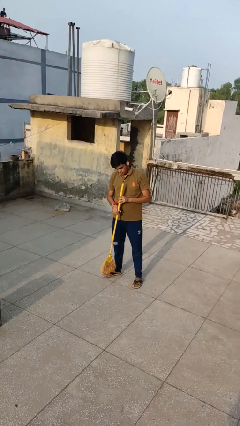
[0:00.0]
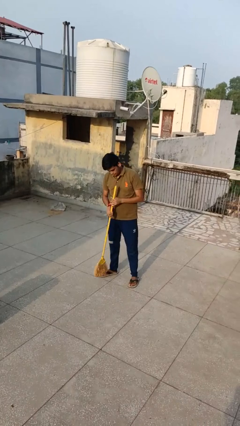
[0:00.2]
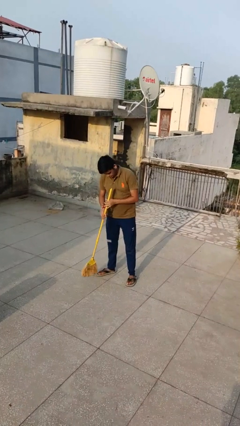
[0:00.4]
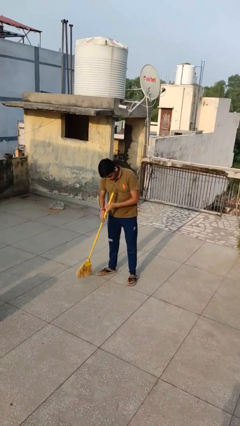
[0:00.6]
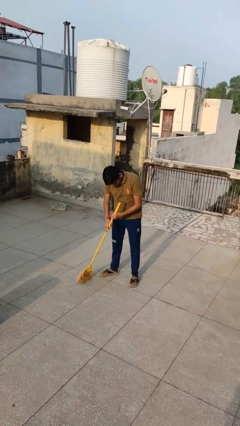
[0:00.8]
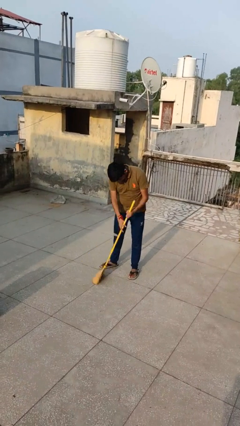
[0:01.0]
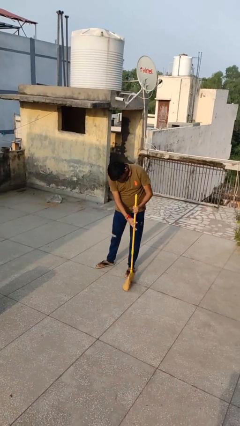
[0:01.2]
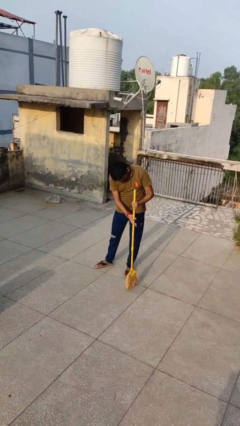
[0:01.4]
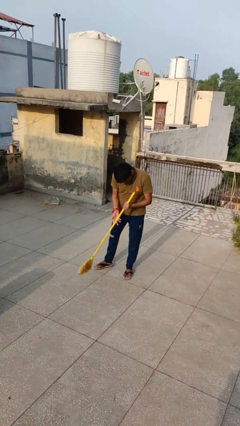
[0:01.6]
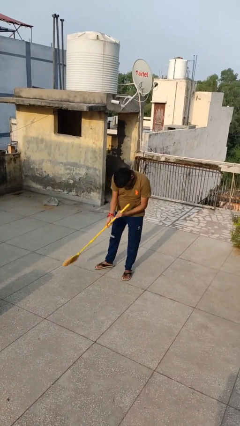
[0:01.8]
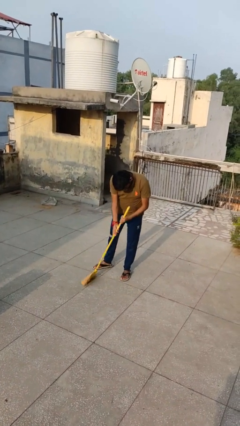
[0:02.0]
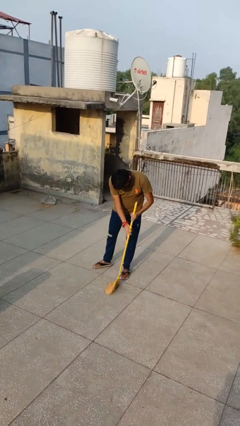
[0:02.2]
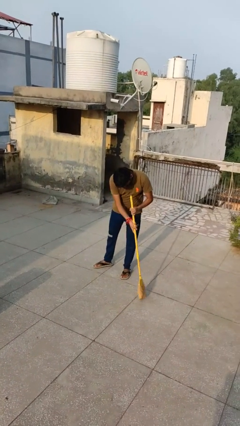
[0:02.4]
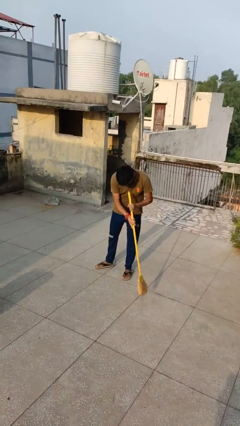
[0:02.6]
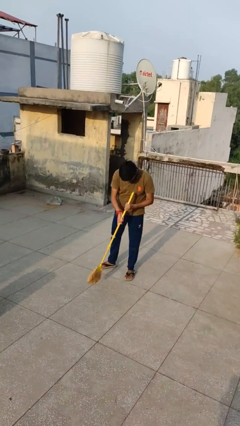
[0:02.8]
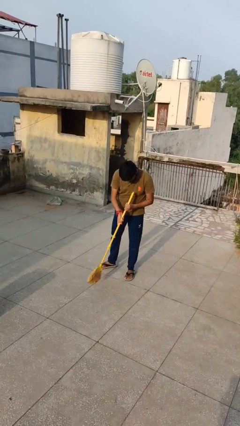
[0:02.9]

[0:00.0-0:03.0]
person sweeps floor

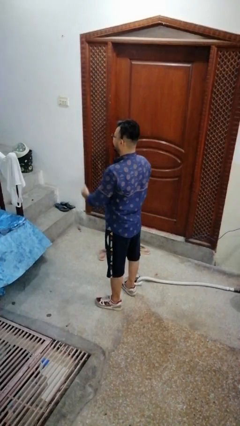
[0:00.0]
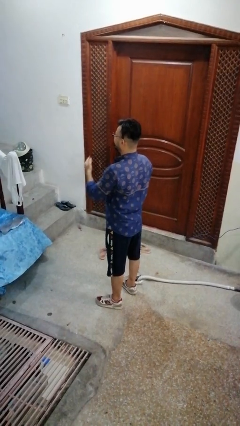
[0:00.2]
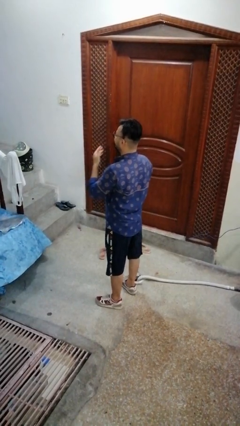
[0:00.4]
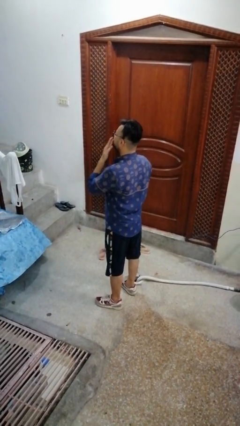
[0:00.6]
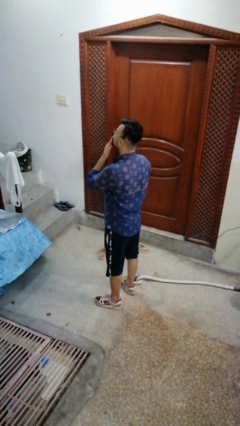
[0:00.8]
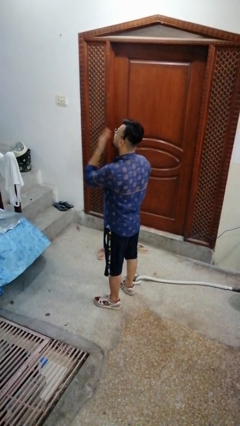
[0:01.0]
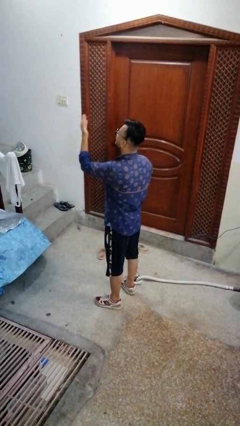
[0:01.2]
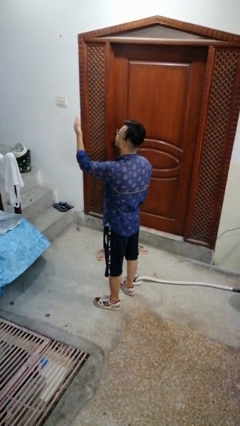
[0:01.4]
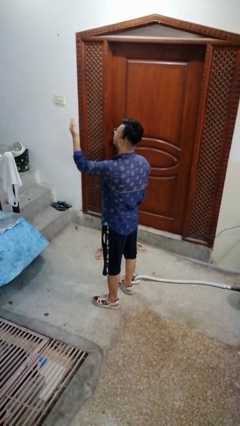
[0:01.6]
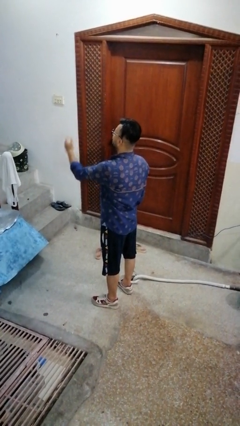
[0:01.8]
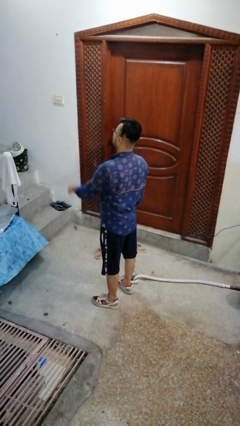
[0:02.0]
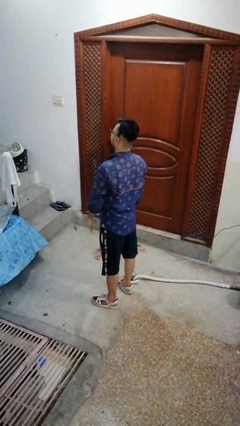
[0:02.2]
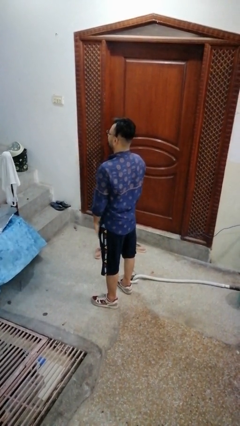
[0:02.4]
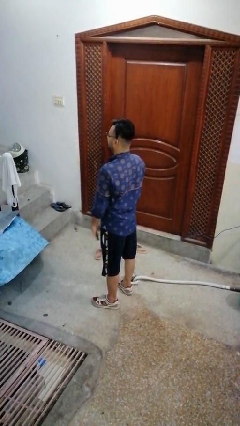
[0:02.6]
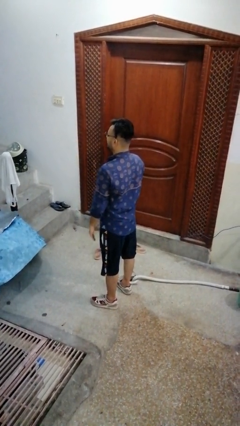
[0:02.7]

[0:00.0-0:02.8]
person gestures blow kiss

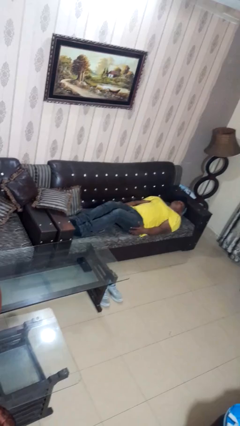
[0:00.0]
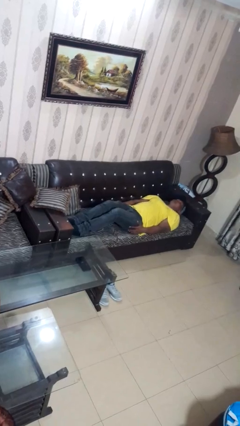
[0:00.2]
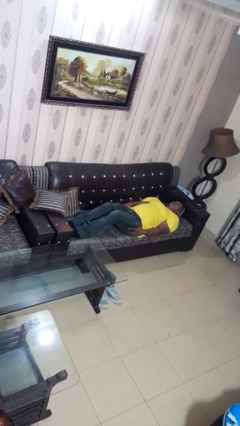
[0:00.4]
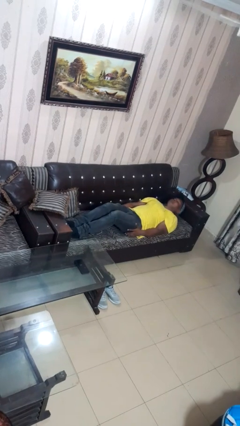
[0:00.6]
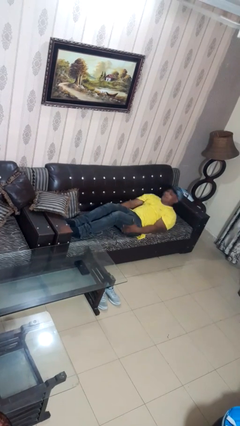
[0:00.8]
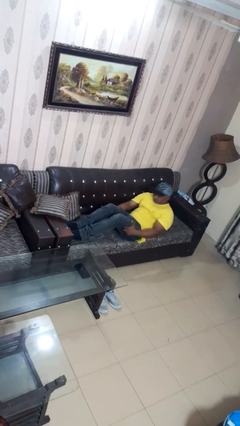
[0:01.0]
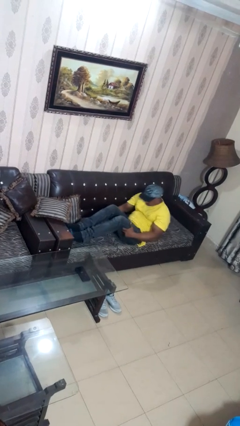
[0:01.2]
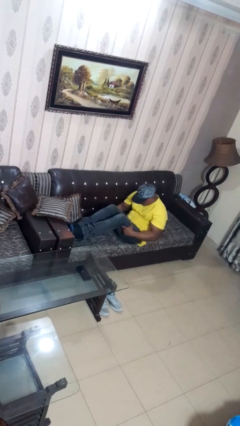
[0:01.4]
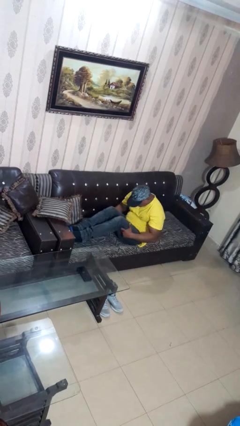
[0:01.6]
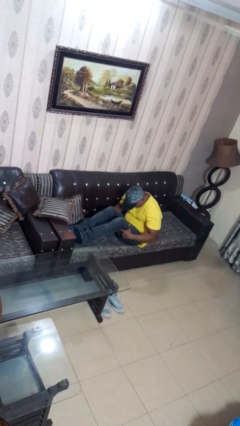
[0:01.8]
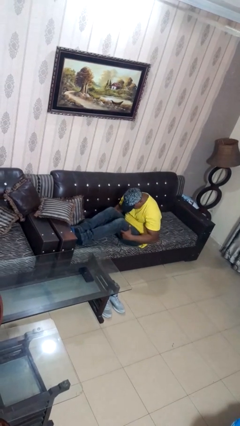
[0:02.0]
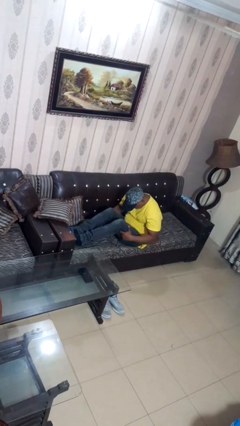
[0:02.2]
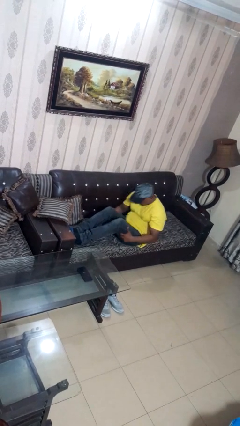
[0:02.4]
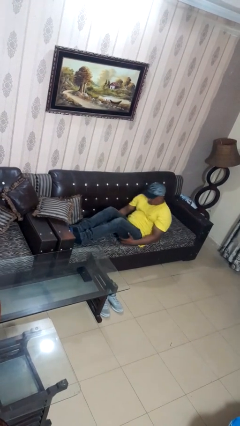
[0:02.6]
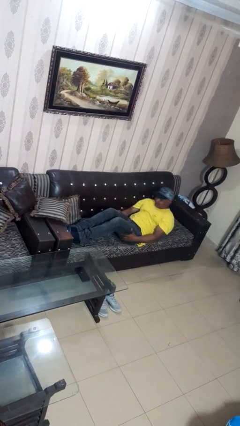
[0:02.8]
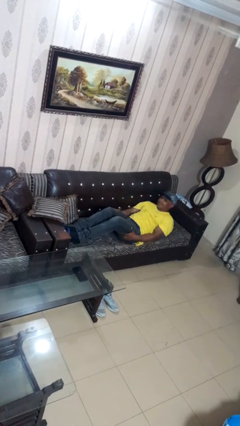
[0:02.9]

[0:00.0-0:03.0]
person exercises with situp

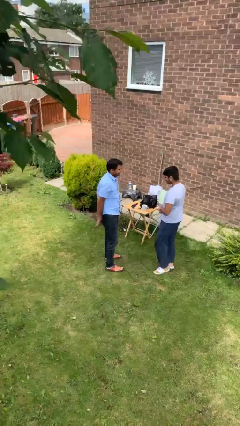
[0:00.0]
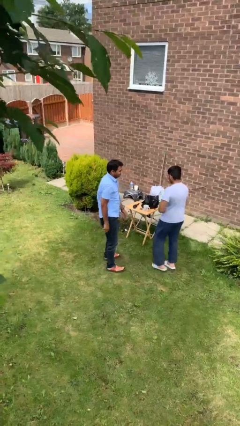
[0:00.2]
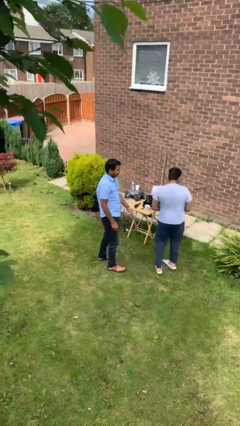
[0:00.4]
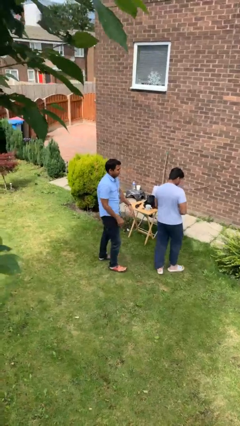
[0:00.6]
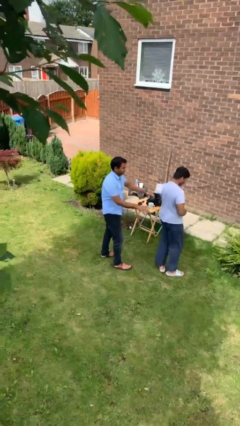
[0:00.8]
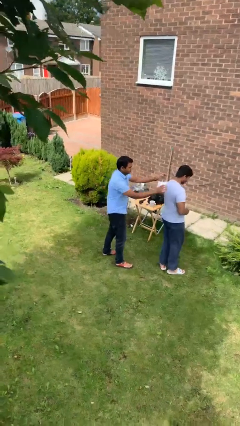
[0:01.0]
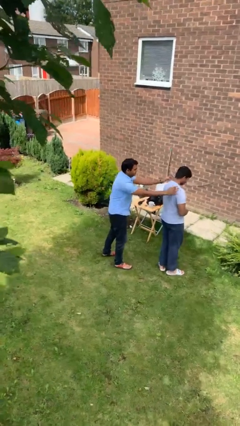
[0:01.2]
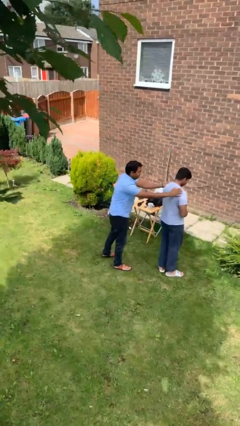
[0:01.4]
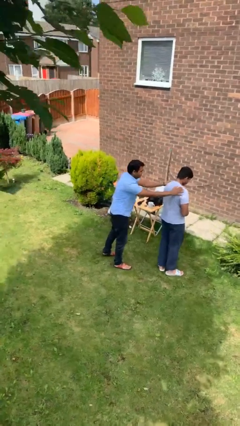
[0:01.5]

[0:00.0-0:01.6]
person grabs person by shoulder

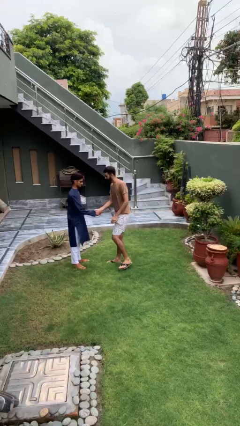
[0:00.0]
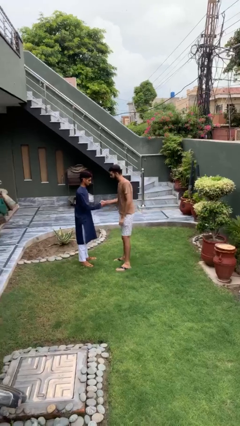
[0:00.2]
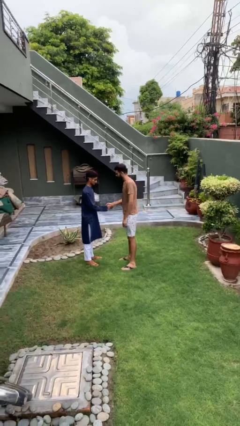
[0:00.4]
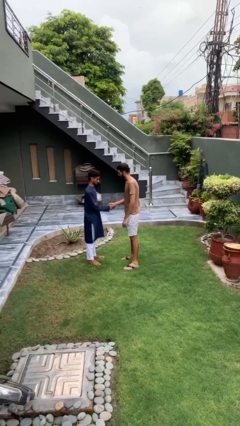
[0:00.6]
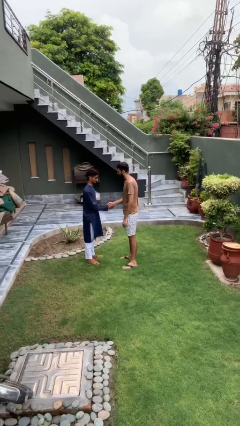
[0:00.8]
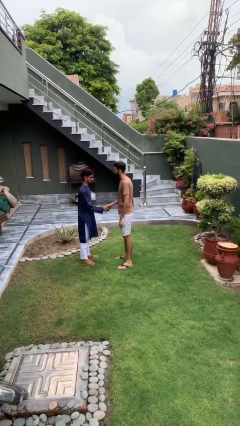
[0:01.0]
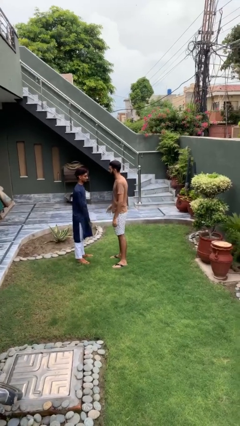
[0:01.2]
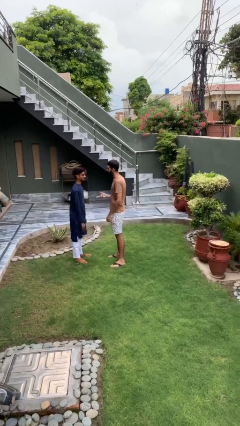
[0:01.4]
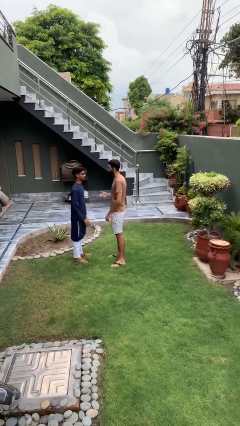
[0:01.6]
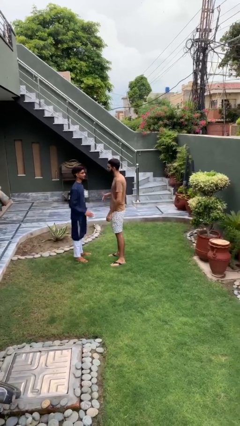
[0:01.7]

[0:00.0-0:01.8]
person shakes hand

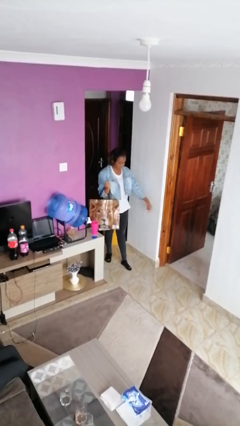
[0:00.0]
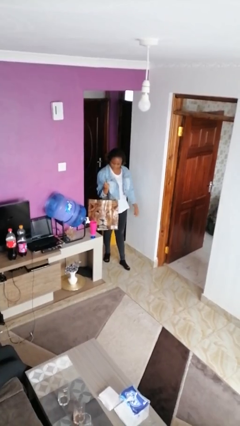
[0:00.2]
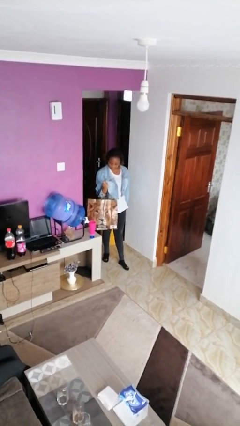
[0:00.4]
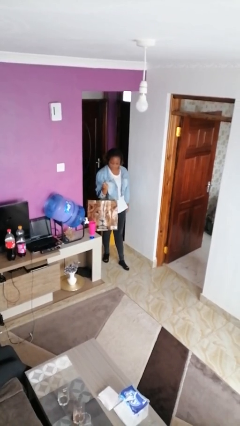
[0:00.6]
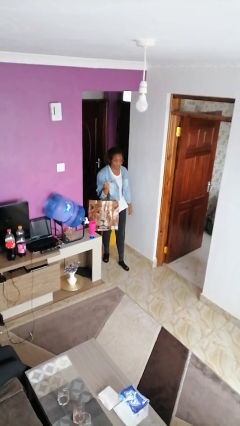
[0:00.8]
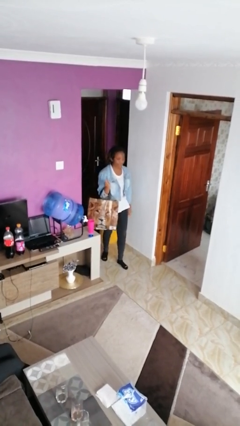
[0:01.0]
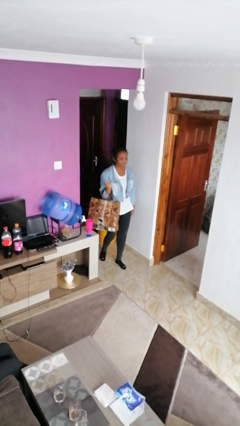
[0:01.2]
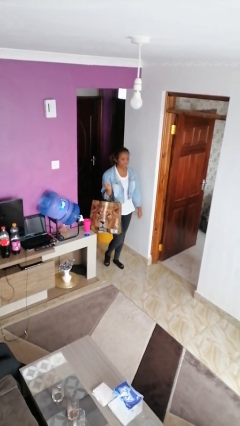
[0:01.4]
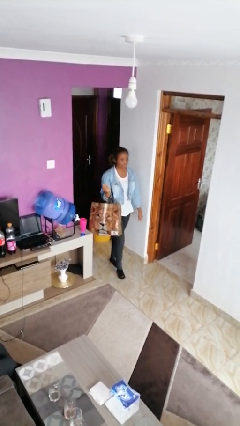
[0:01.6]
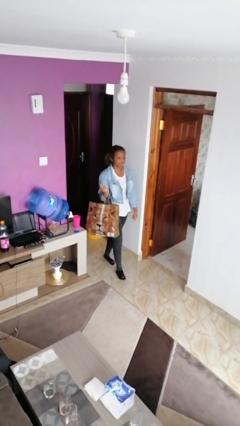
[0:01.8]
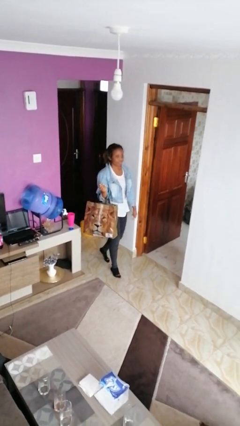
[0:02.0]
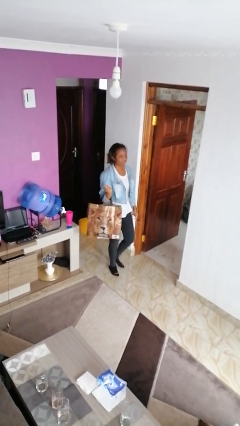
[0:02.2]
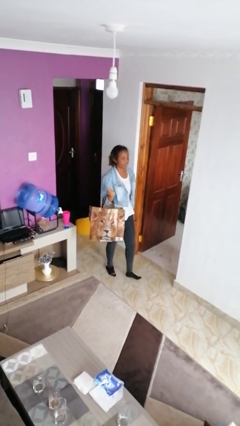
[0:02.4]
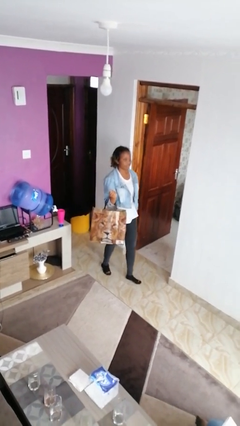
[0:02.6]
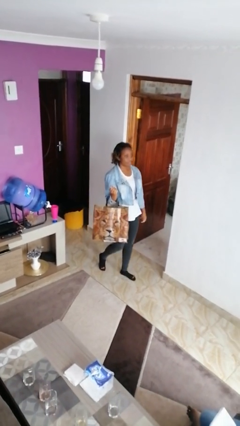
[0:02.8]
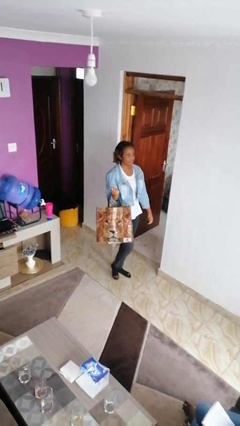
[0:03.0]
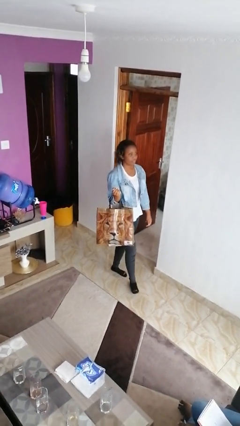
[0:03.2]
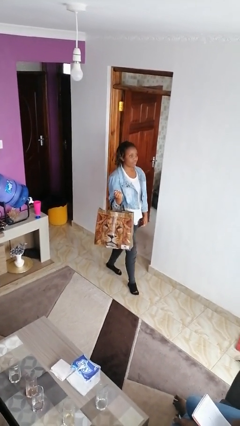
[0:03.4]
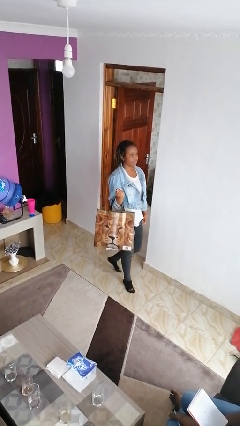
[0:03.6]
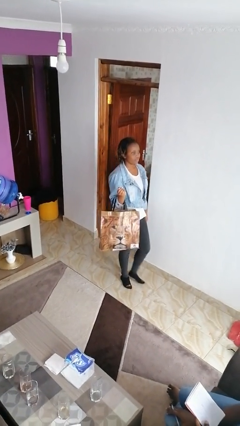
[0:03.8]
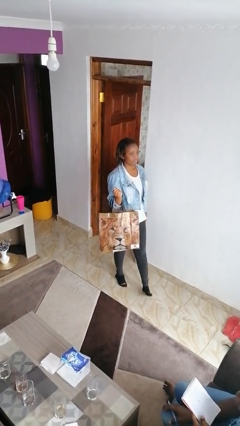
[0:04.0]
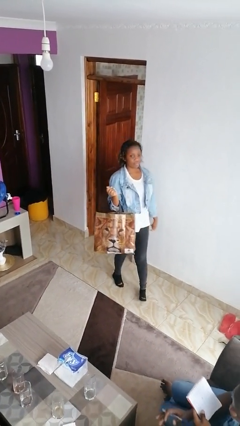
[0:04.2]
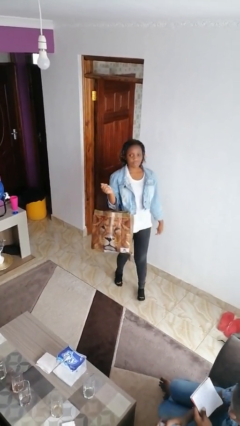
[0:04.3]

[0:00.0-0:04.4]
person carries groceries

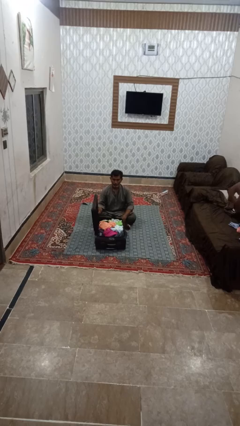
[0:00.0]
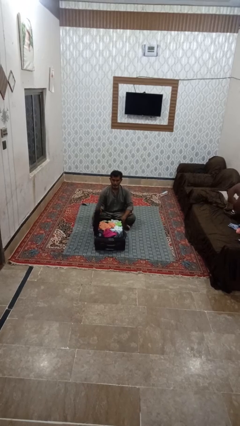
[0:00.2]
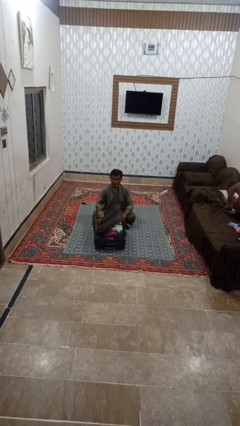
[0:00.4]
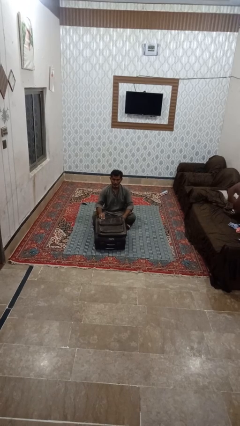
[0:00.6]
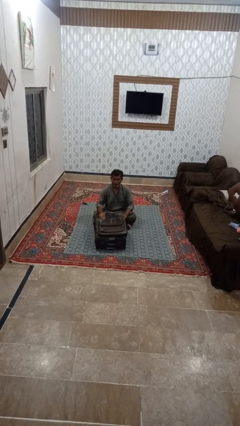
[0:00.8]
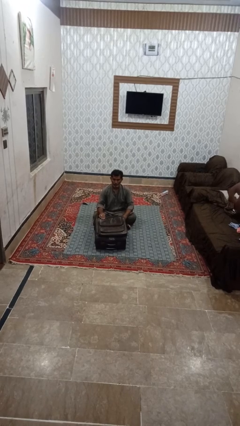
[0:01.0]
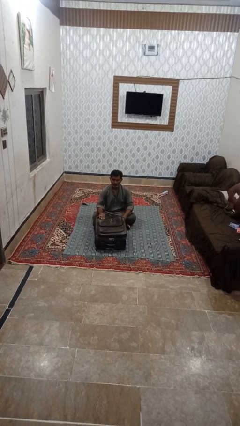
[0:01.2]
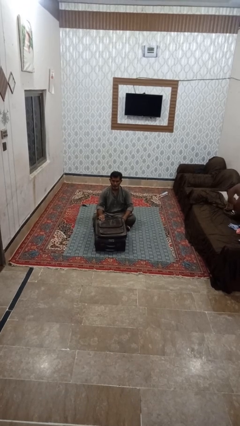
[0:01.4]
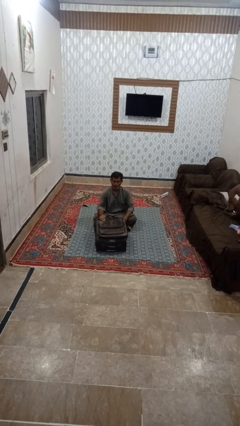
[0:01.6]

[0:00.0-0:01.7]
person closes clothes washer
